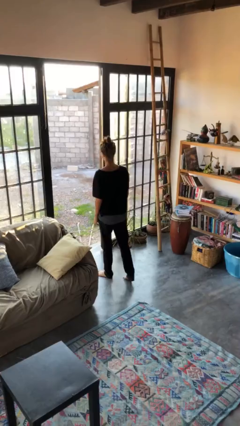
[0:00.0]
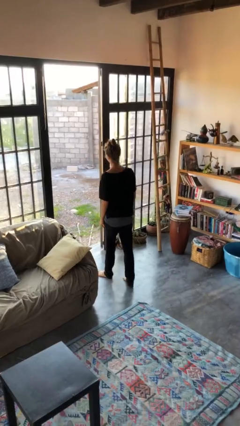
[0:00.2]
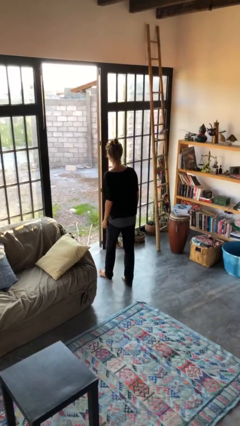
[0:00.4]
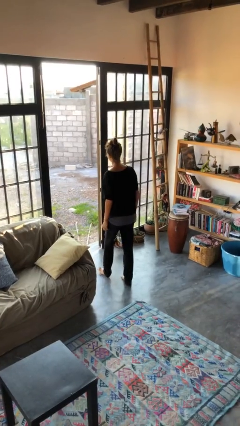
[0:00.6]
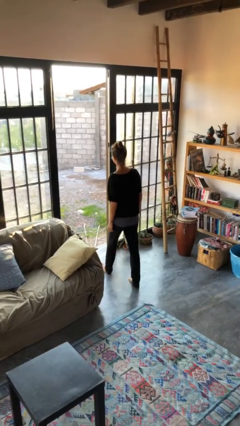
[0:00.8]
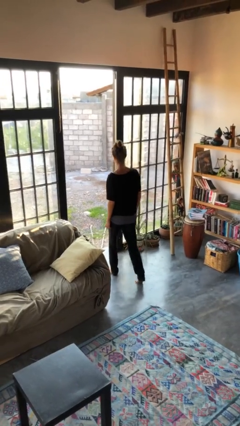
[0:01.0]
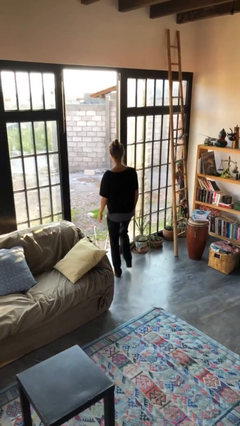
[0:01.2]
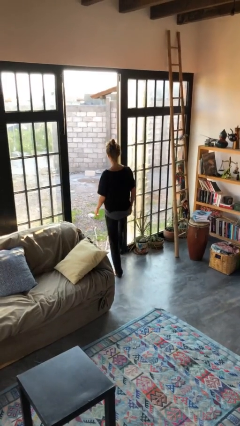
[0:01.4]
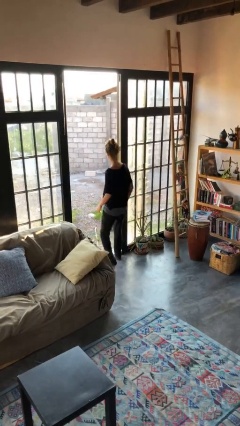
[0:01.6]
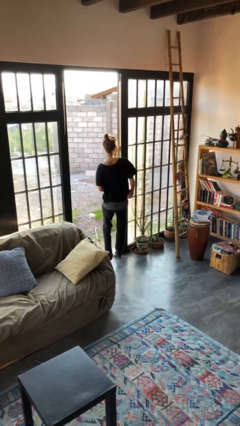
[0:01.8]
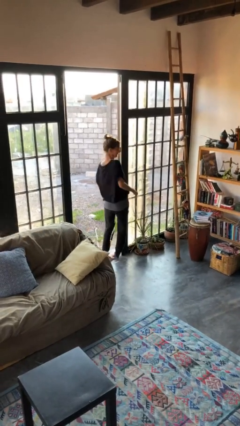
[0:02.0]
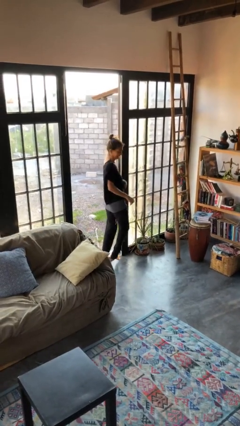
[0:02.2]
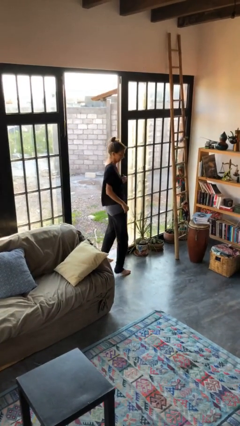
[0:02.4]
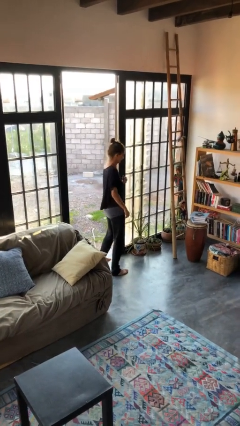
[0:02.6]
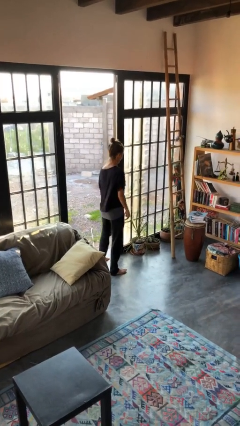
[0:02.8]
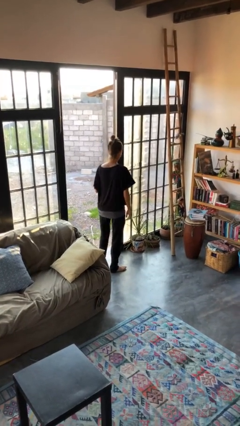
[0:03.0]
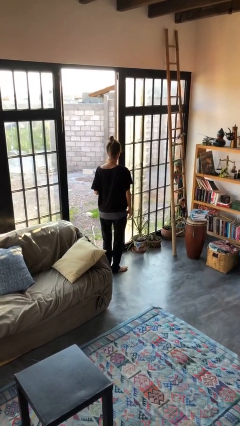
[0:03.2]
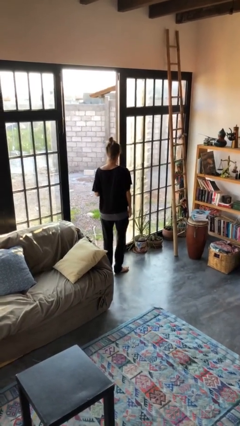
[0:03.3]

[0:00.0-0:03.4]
person bumps into wall

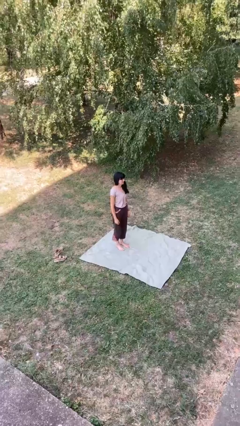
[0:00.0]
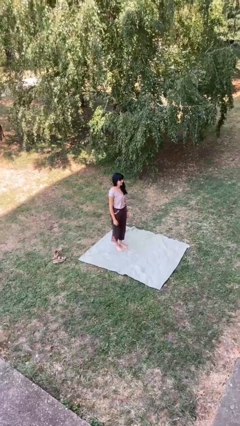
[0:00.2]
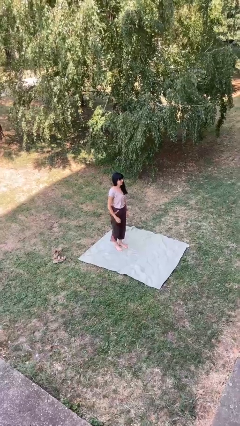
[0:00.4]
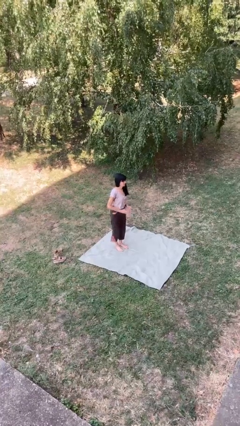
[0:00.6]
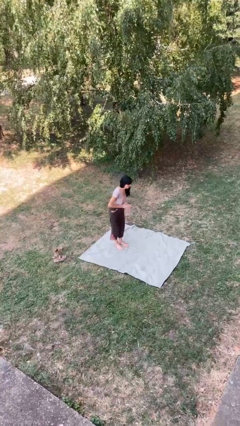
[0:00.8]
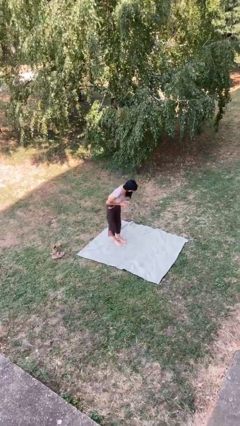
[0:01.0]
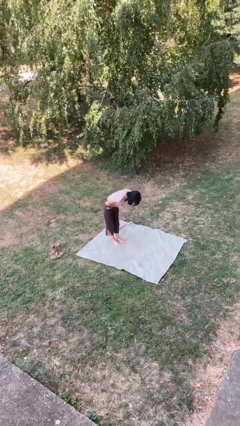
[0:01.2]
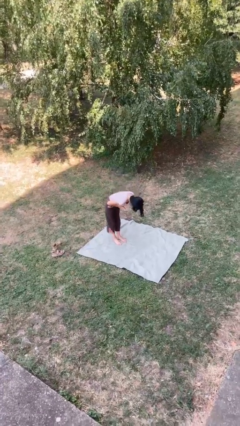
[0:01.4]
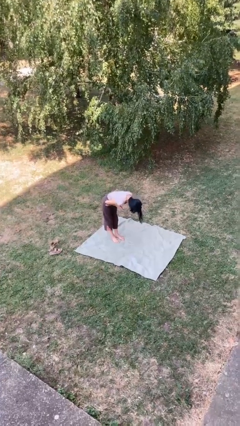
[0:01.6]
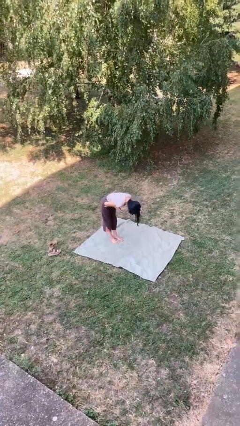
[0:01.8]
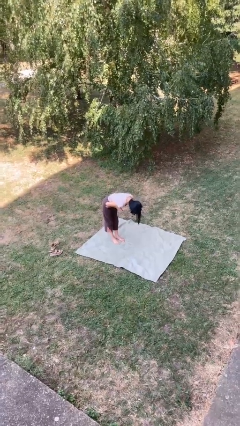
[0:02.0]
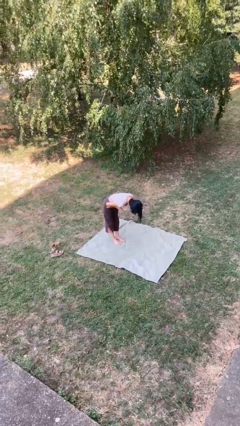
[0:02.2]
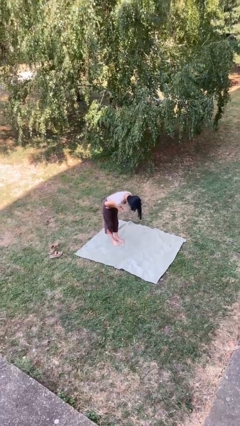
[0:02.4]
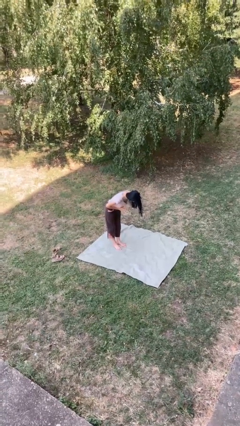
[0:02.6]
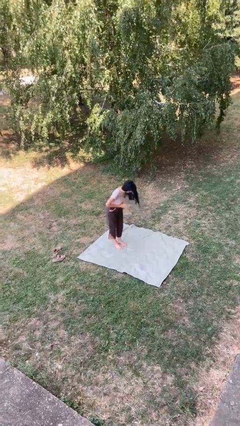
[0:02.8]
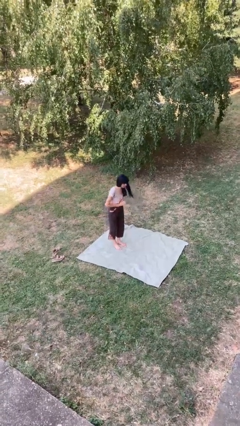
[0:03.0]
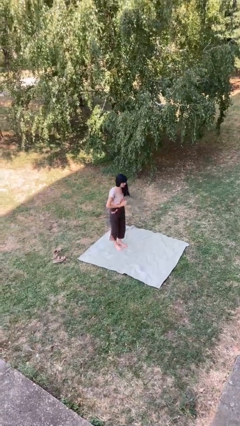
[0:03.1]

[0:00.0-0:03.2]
person bows

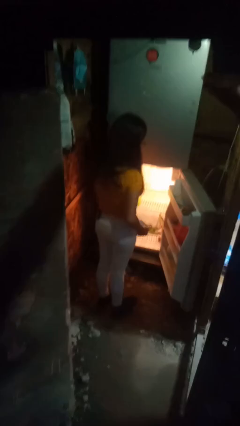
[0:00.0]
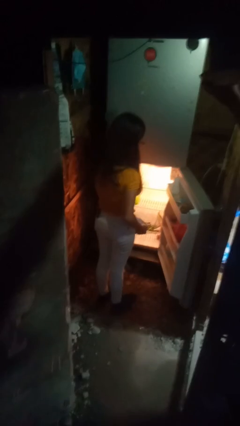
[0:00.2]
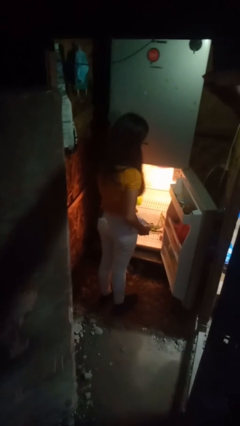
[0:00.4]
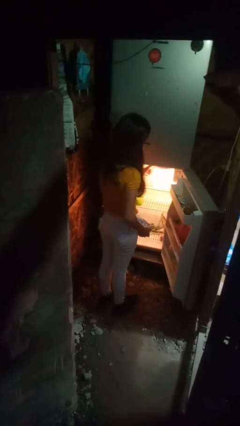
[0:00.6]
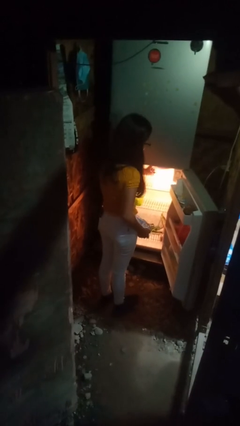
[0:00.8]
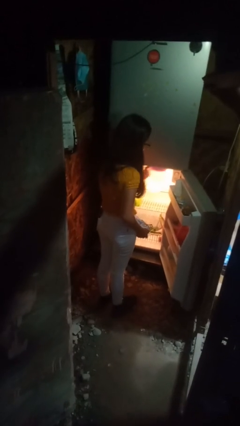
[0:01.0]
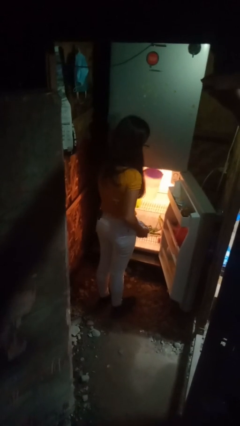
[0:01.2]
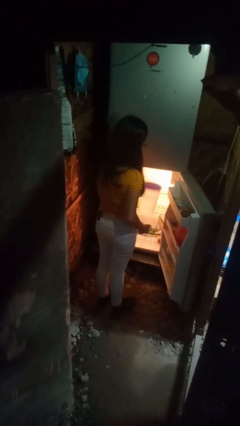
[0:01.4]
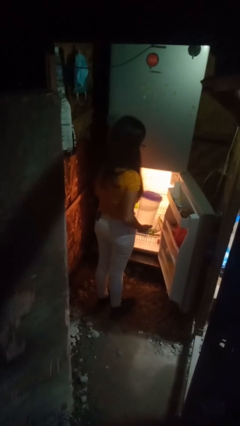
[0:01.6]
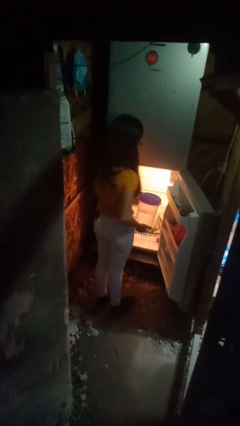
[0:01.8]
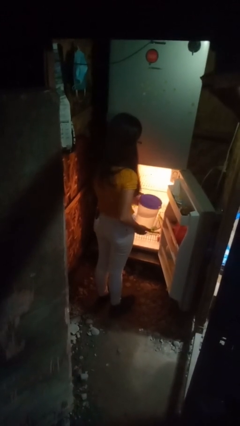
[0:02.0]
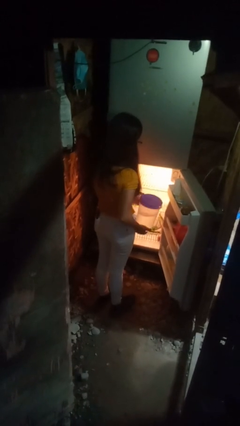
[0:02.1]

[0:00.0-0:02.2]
person takes object from refrigerator

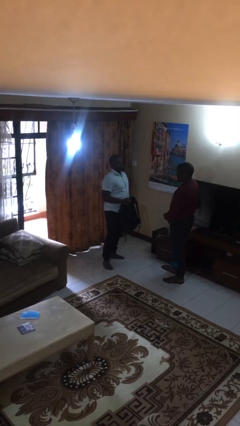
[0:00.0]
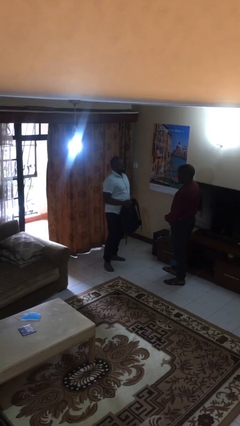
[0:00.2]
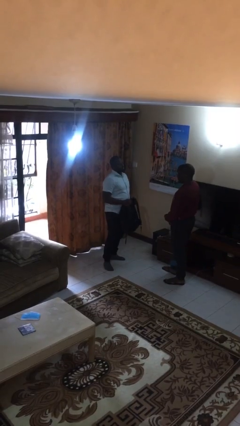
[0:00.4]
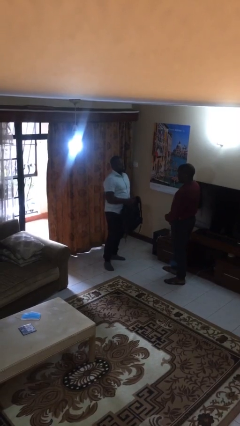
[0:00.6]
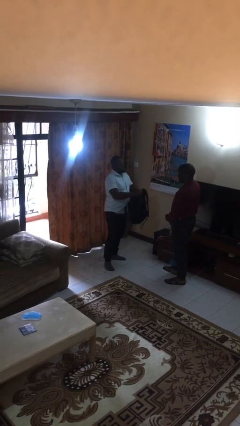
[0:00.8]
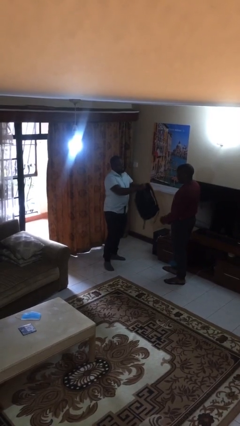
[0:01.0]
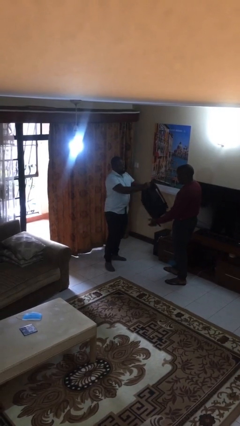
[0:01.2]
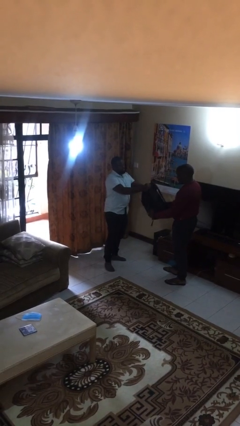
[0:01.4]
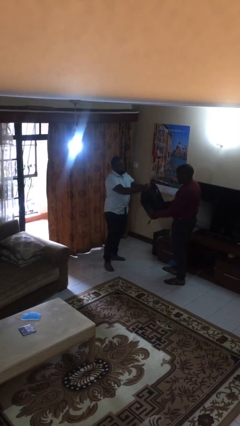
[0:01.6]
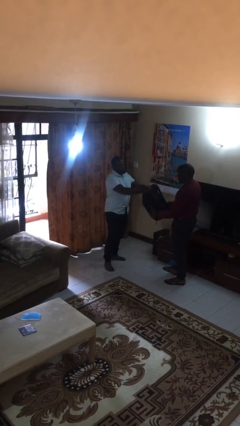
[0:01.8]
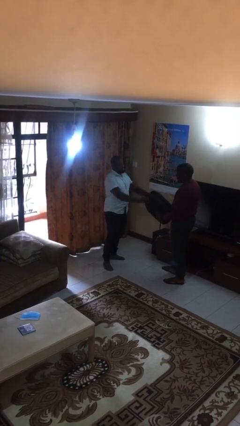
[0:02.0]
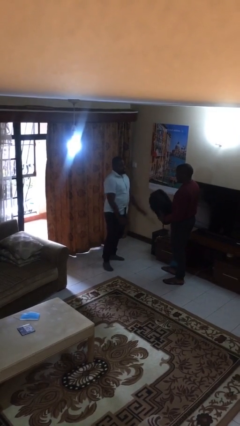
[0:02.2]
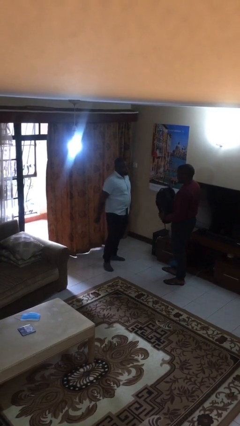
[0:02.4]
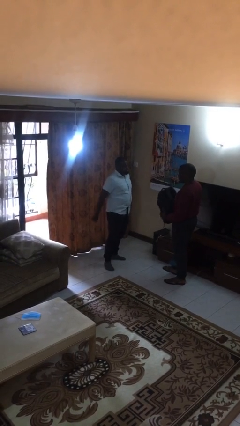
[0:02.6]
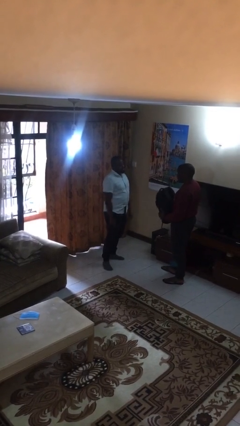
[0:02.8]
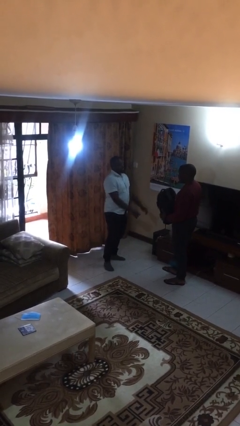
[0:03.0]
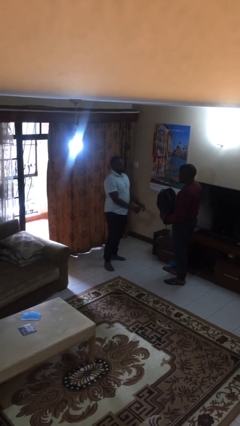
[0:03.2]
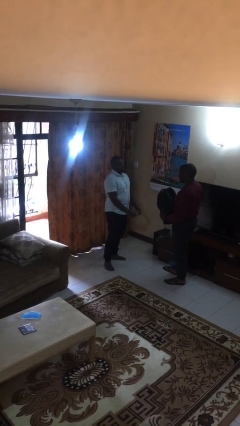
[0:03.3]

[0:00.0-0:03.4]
person transfers object to person

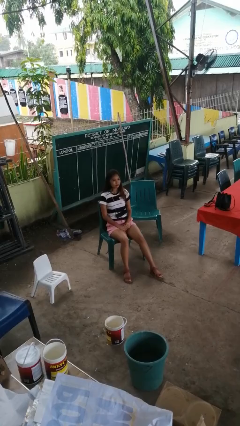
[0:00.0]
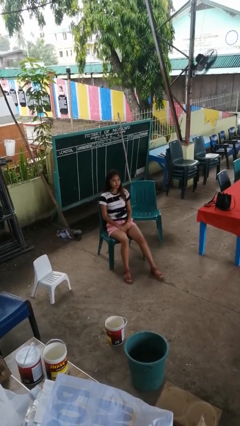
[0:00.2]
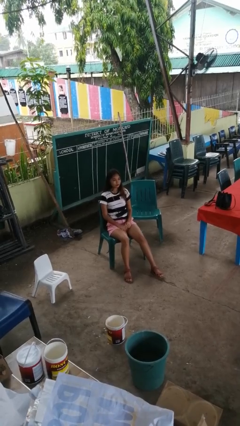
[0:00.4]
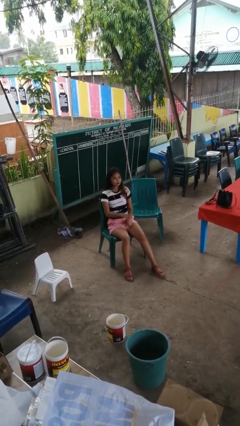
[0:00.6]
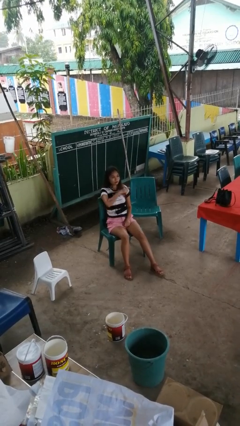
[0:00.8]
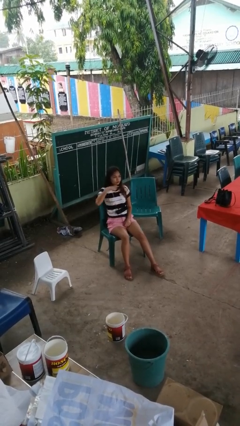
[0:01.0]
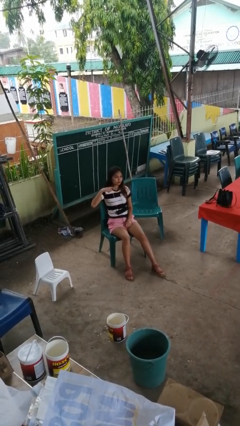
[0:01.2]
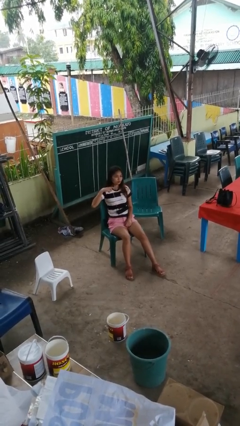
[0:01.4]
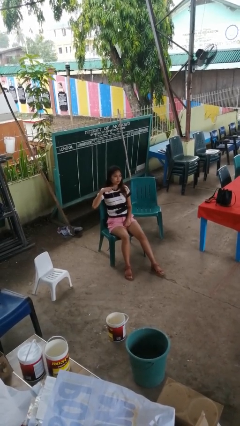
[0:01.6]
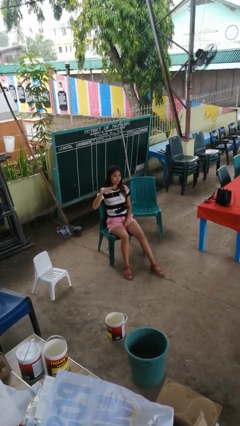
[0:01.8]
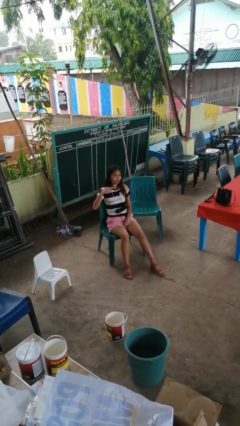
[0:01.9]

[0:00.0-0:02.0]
person gestures cut

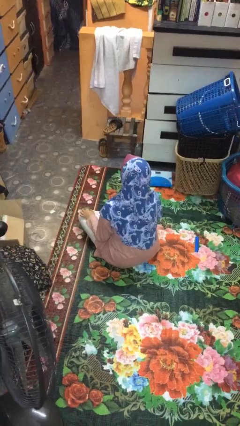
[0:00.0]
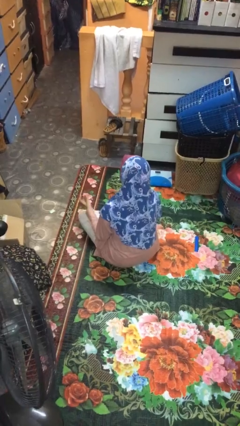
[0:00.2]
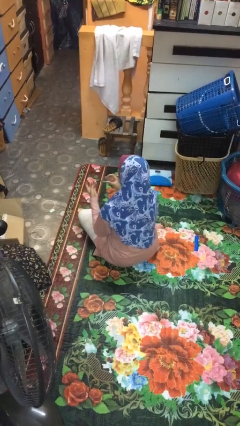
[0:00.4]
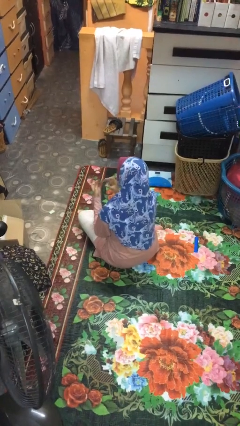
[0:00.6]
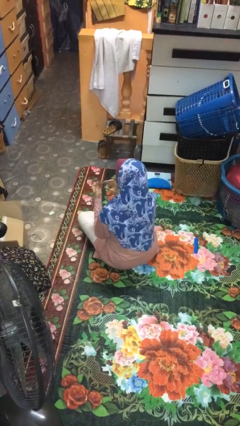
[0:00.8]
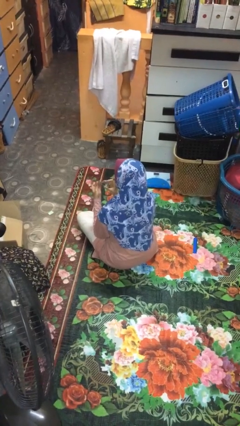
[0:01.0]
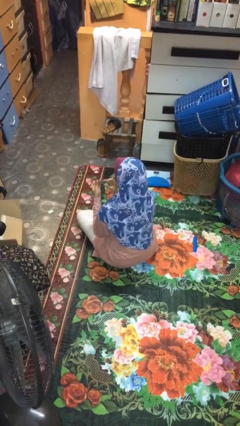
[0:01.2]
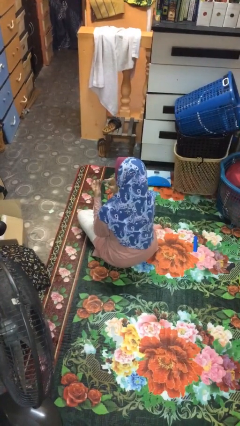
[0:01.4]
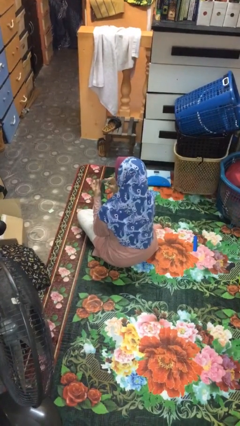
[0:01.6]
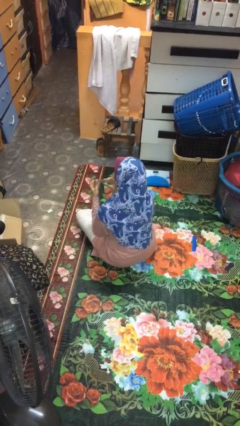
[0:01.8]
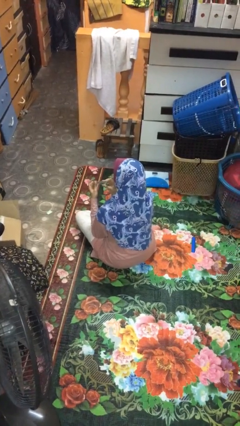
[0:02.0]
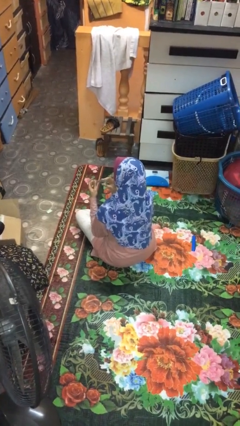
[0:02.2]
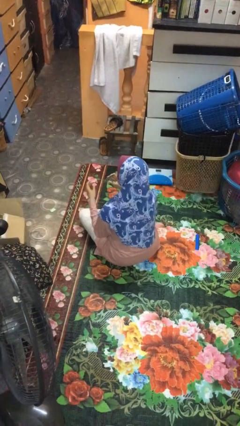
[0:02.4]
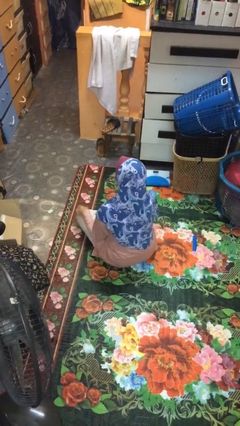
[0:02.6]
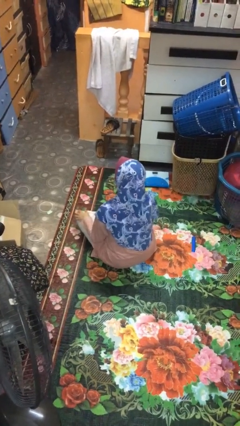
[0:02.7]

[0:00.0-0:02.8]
person clips fingernails

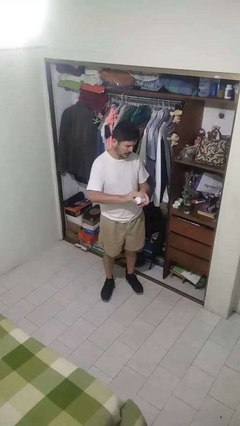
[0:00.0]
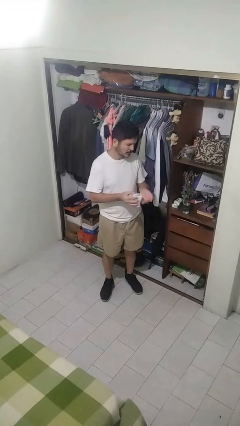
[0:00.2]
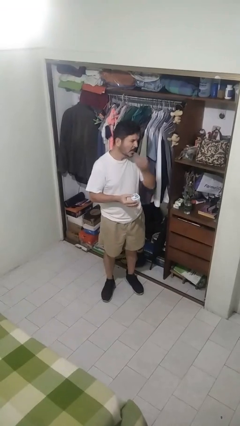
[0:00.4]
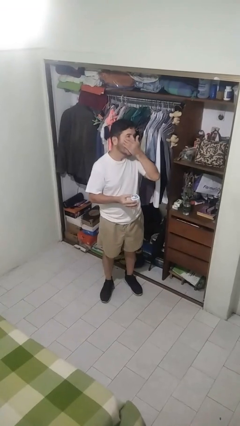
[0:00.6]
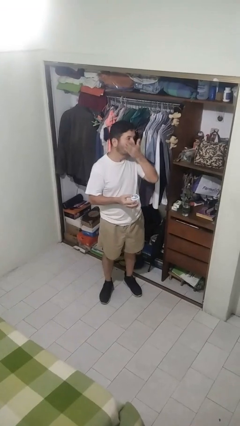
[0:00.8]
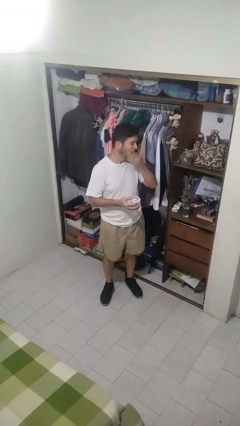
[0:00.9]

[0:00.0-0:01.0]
person takes medicine pills
